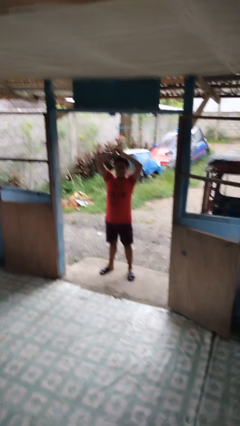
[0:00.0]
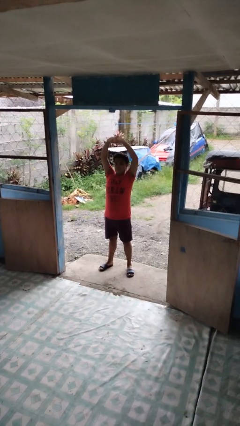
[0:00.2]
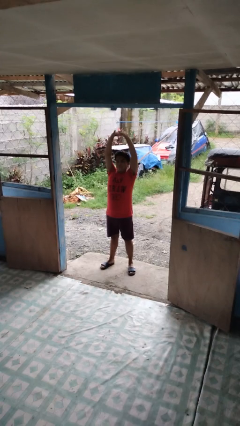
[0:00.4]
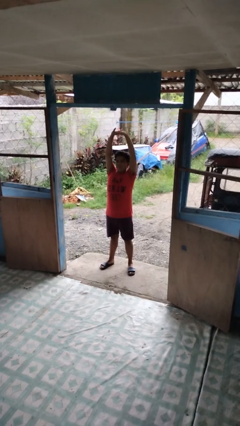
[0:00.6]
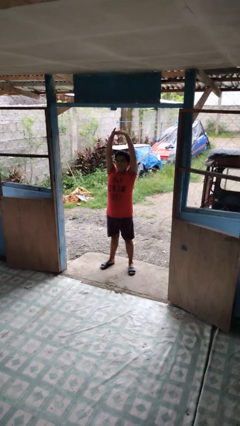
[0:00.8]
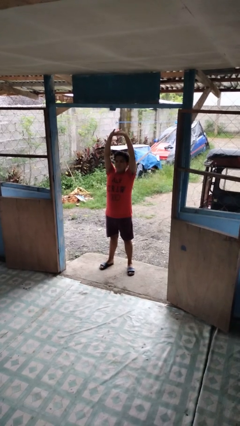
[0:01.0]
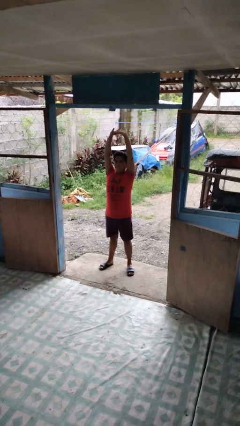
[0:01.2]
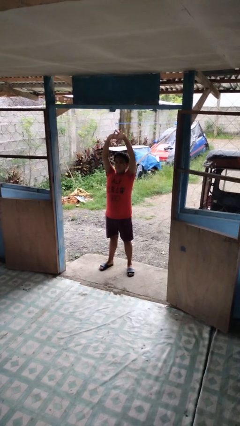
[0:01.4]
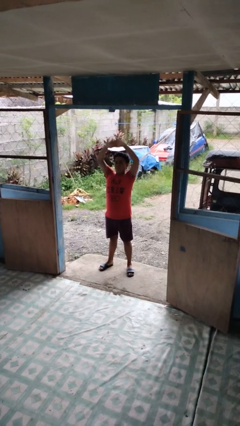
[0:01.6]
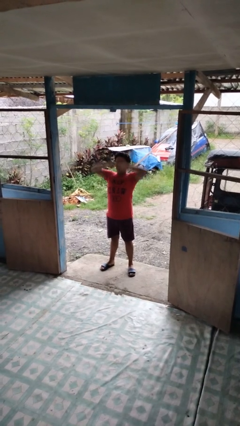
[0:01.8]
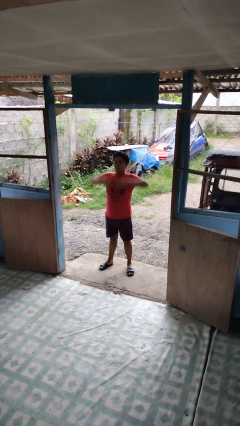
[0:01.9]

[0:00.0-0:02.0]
person stretches arms over head

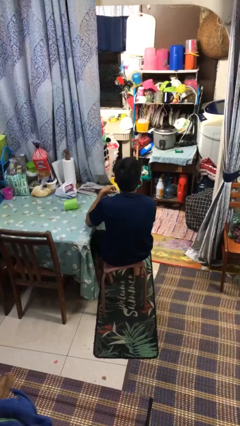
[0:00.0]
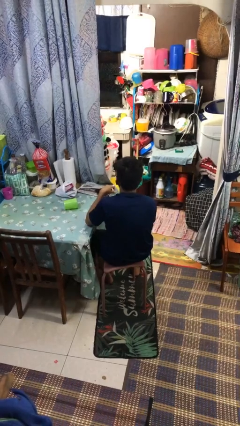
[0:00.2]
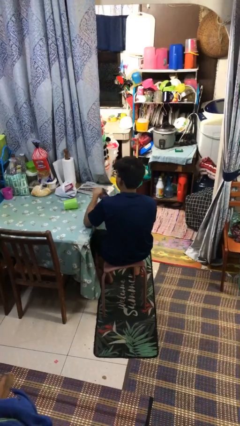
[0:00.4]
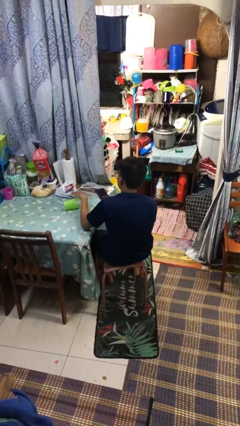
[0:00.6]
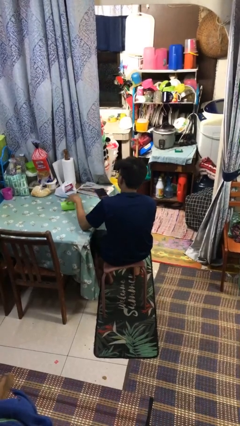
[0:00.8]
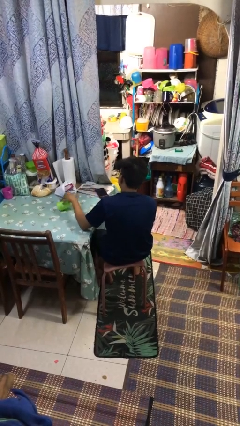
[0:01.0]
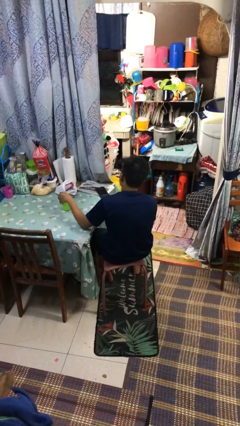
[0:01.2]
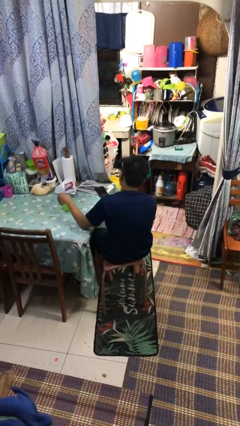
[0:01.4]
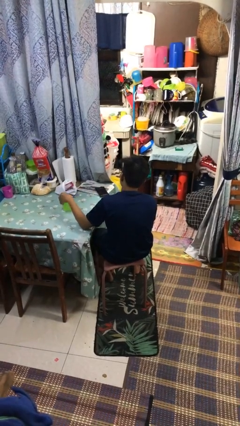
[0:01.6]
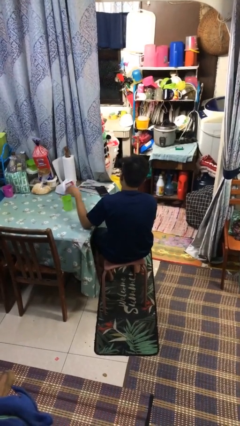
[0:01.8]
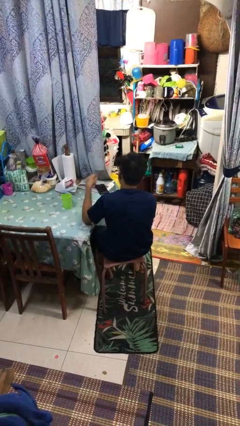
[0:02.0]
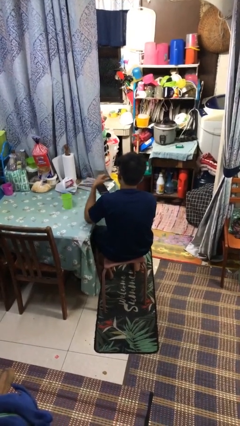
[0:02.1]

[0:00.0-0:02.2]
person sets upright glass

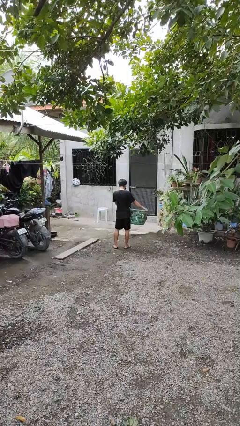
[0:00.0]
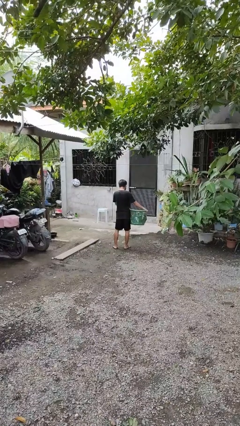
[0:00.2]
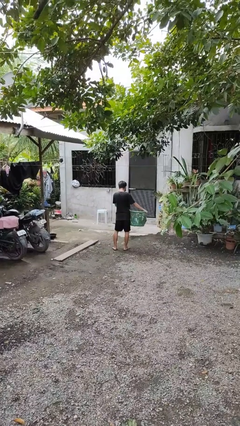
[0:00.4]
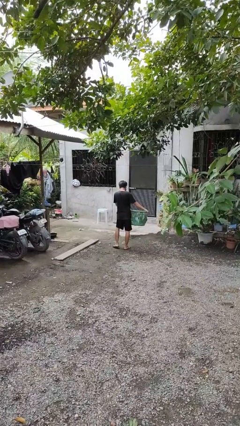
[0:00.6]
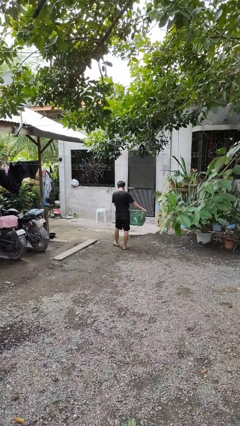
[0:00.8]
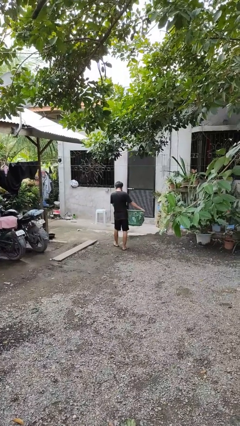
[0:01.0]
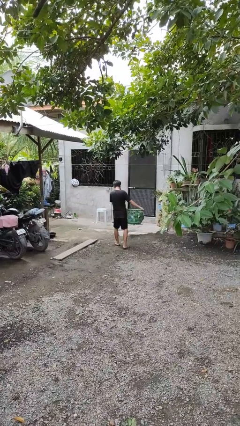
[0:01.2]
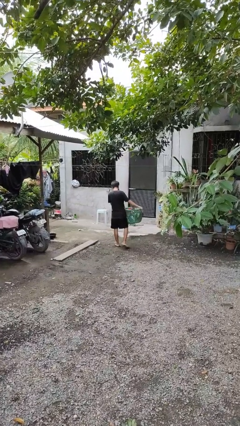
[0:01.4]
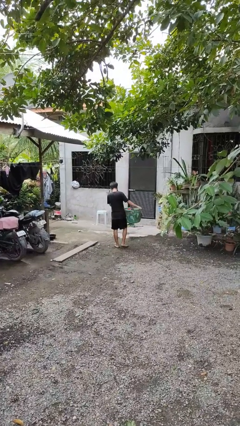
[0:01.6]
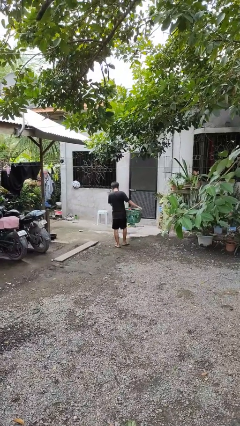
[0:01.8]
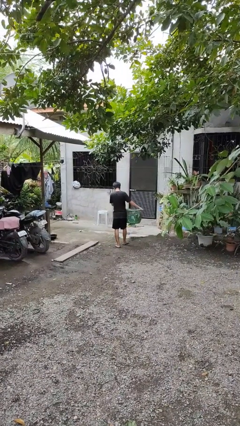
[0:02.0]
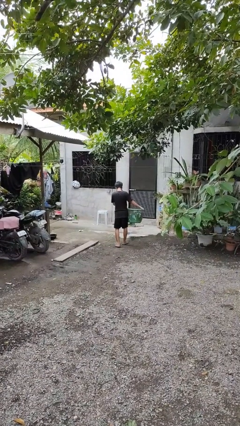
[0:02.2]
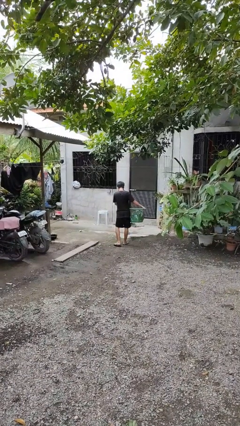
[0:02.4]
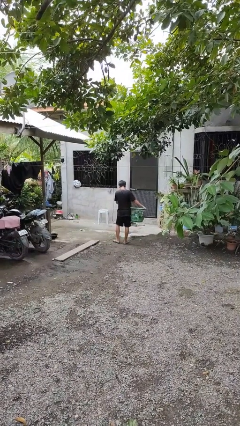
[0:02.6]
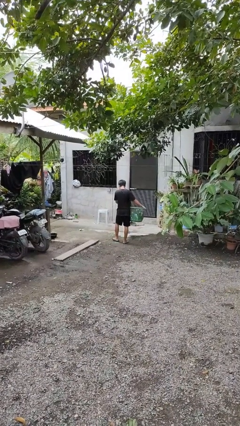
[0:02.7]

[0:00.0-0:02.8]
person carries laundry basket

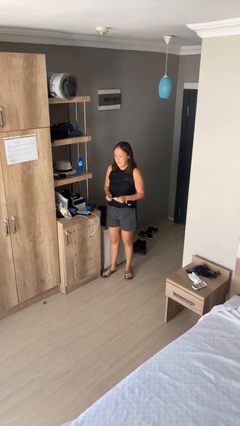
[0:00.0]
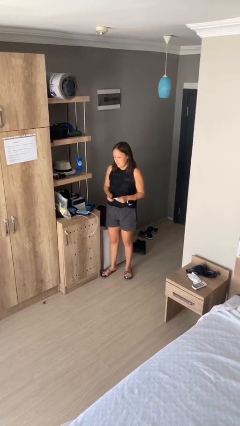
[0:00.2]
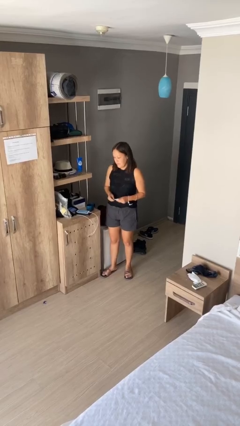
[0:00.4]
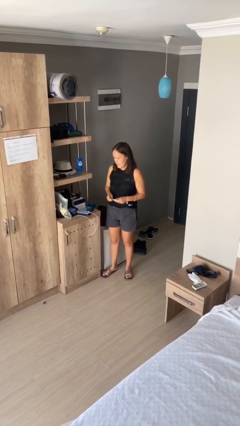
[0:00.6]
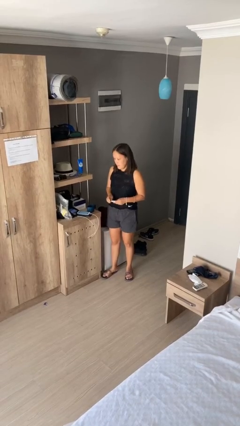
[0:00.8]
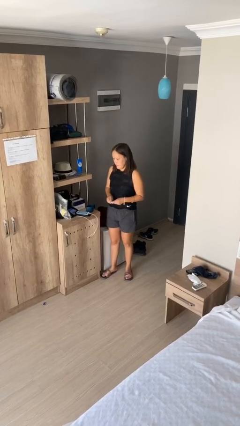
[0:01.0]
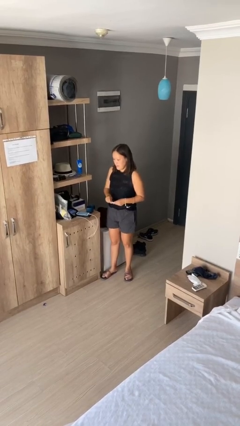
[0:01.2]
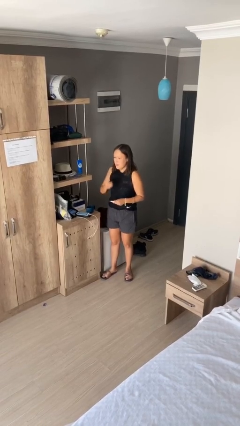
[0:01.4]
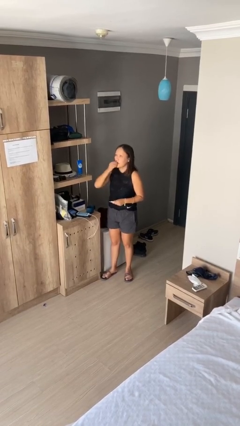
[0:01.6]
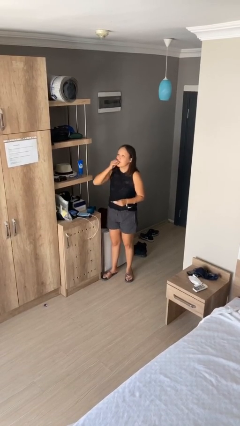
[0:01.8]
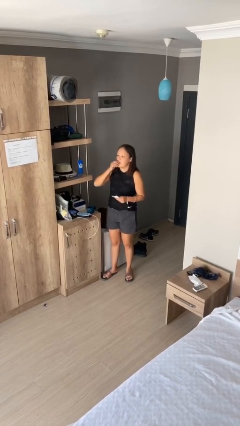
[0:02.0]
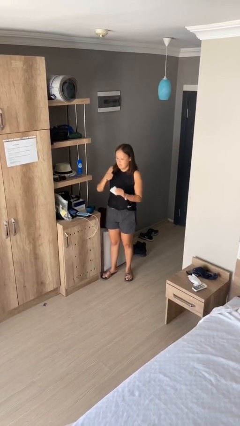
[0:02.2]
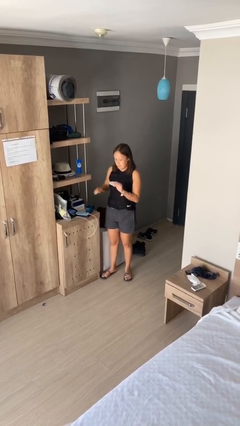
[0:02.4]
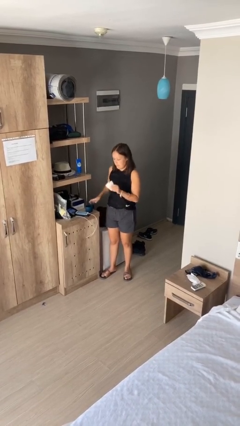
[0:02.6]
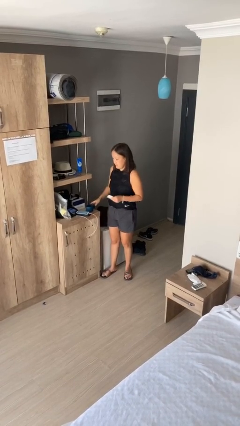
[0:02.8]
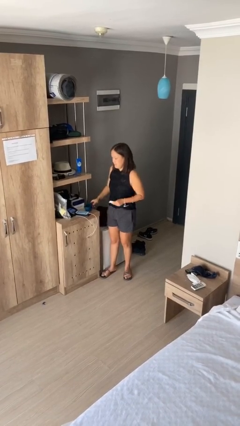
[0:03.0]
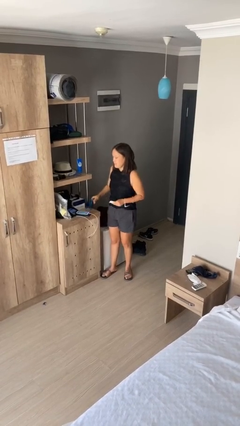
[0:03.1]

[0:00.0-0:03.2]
person takes medicine pills

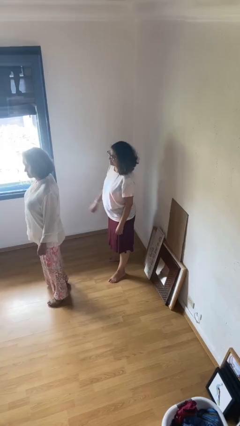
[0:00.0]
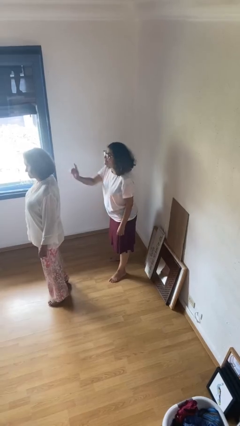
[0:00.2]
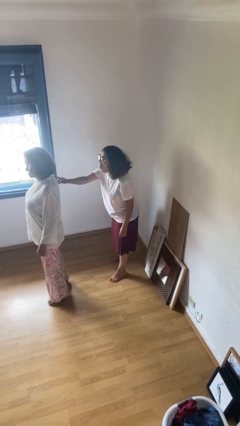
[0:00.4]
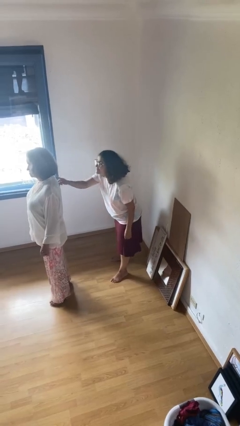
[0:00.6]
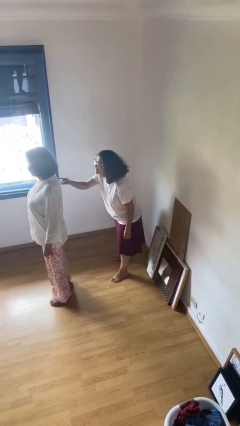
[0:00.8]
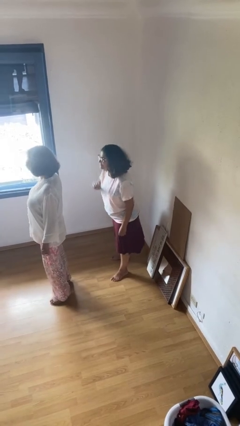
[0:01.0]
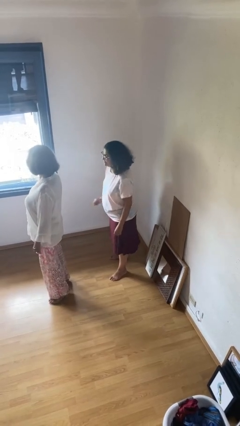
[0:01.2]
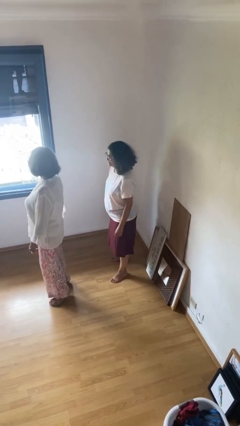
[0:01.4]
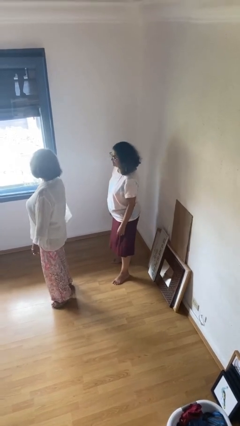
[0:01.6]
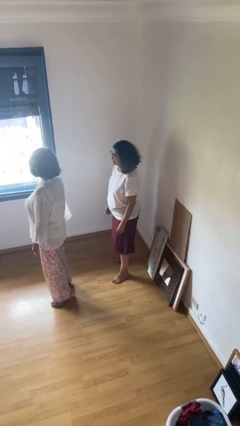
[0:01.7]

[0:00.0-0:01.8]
person touches back of person

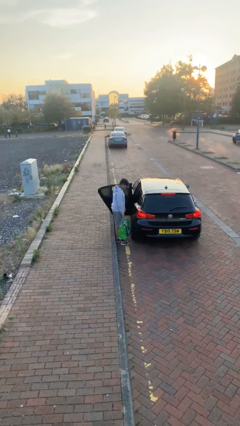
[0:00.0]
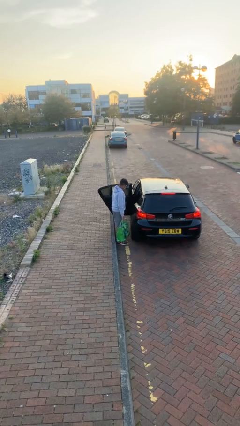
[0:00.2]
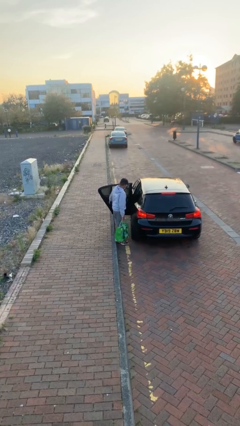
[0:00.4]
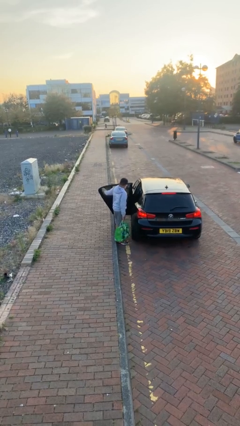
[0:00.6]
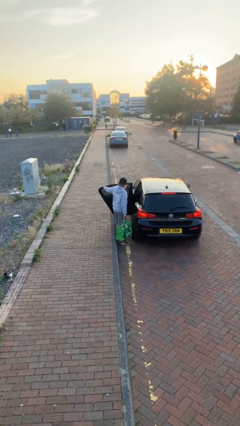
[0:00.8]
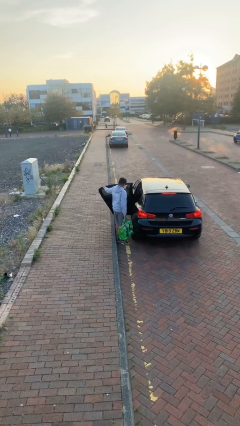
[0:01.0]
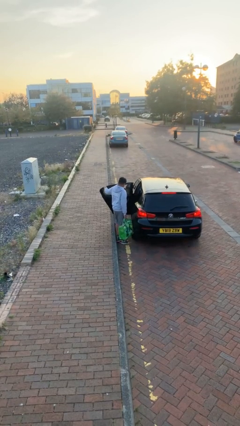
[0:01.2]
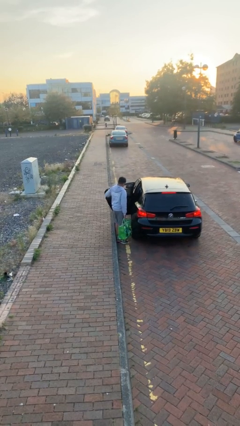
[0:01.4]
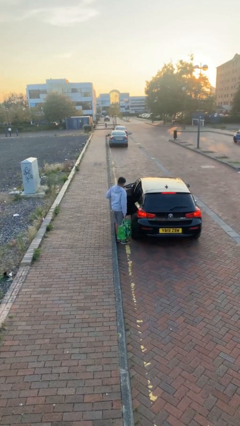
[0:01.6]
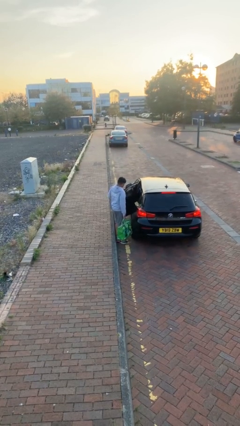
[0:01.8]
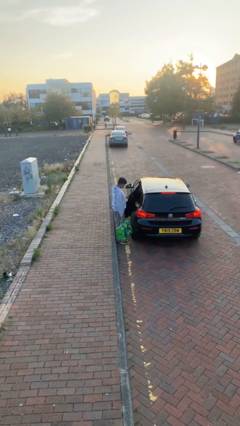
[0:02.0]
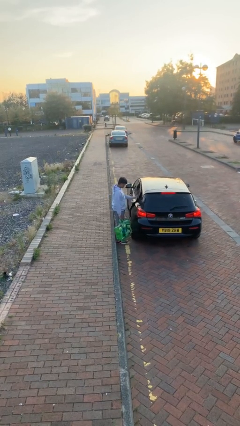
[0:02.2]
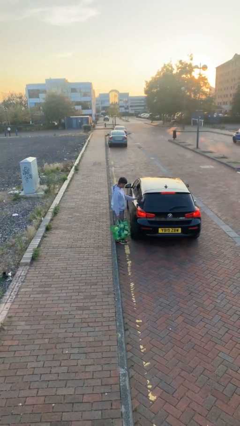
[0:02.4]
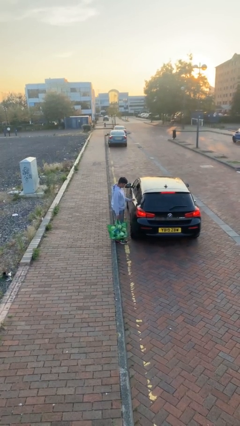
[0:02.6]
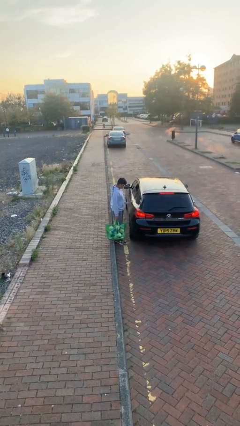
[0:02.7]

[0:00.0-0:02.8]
person closes car door

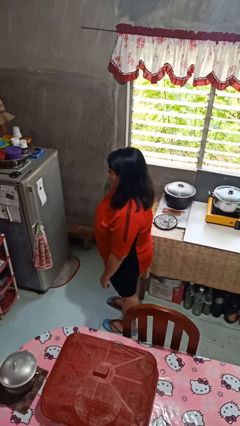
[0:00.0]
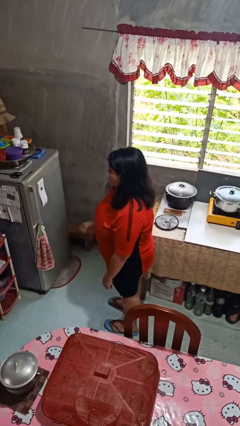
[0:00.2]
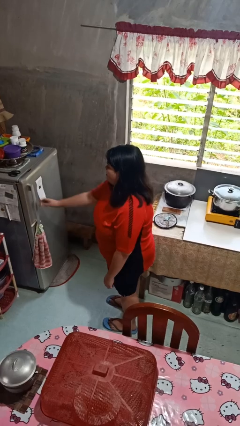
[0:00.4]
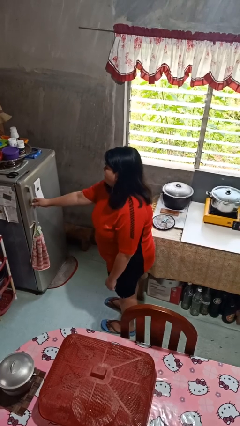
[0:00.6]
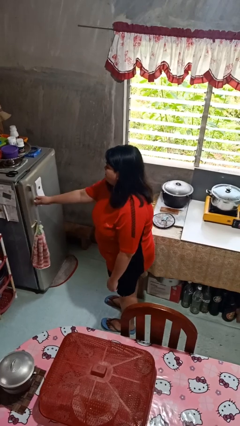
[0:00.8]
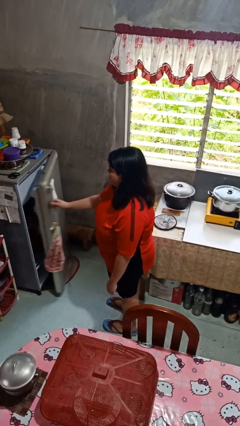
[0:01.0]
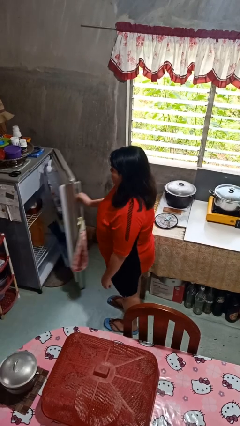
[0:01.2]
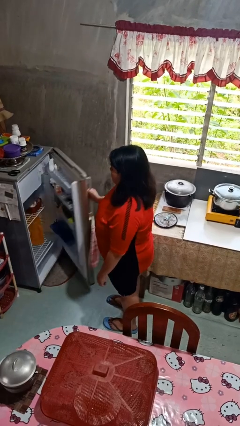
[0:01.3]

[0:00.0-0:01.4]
person opens refrigerator

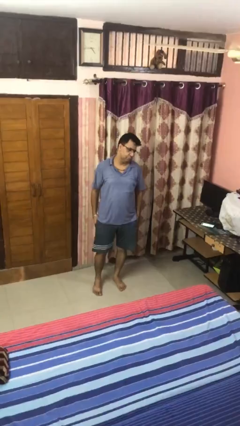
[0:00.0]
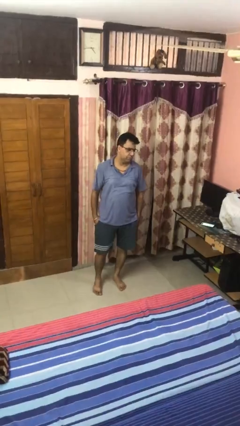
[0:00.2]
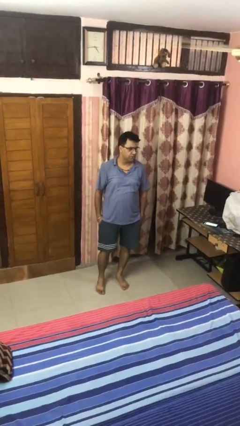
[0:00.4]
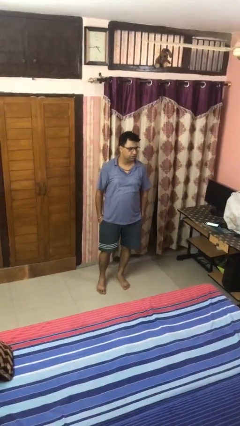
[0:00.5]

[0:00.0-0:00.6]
person shrugs

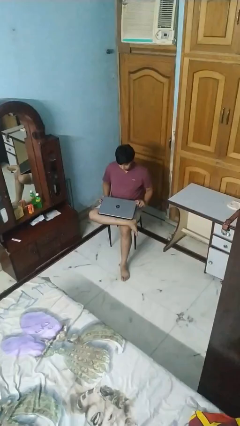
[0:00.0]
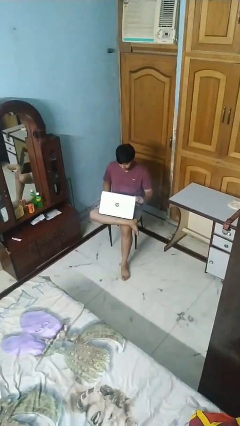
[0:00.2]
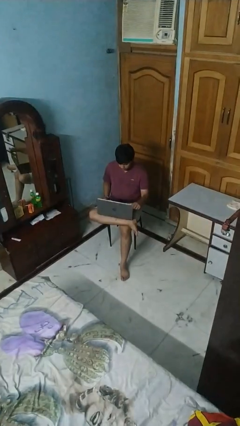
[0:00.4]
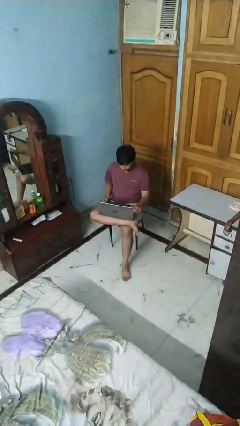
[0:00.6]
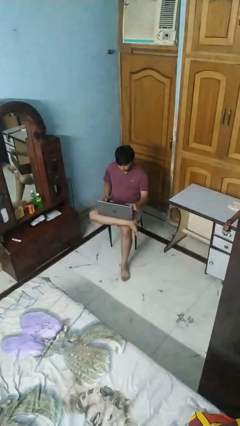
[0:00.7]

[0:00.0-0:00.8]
person opens laptop
